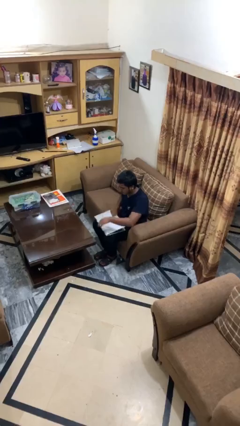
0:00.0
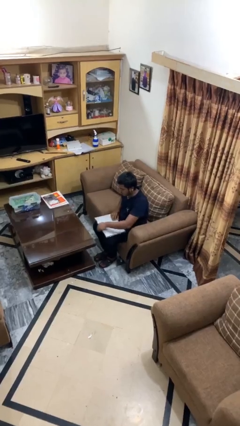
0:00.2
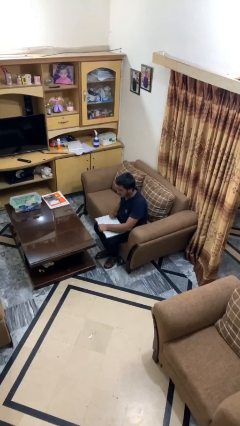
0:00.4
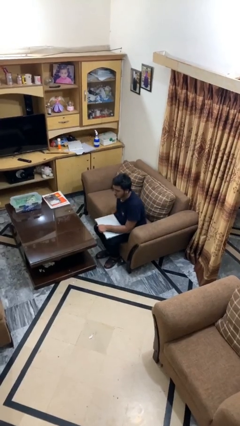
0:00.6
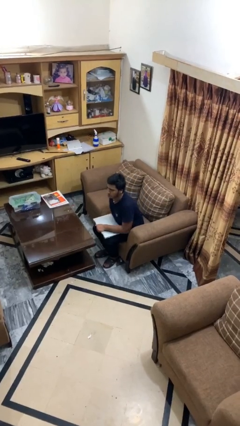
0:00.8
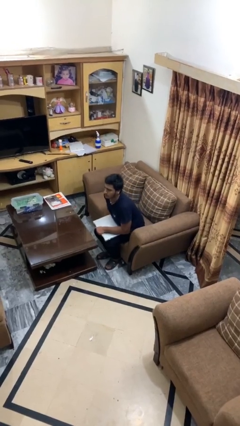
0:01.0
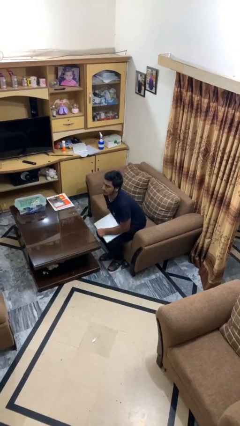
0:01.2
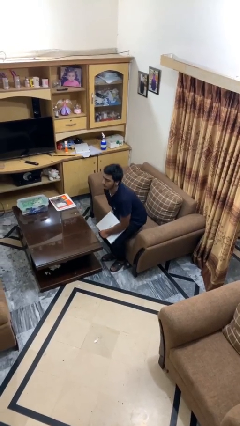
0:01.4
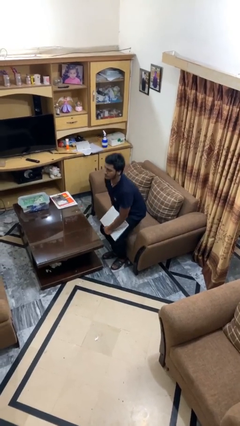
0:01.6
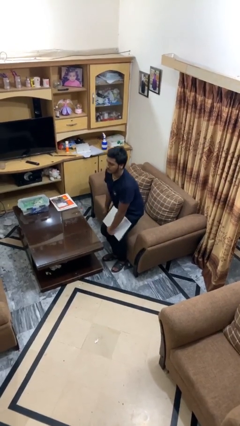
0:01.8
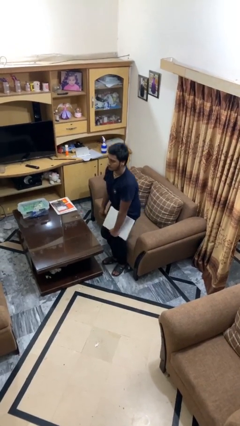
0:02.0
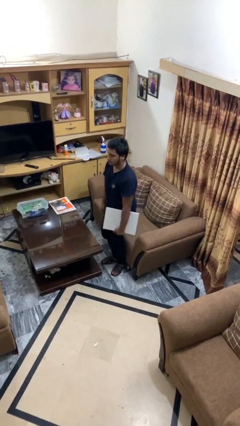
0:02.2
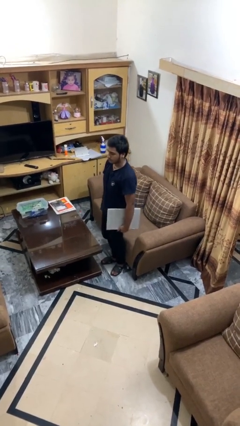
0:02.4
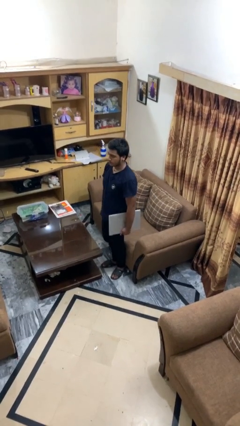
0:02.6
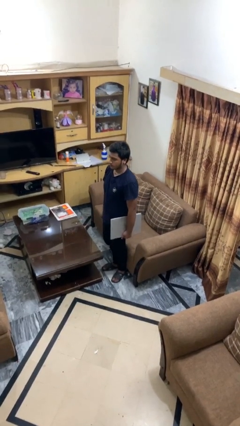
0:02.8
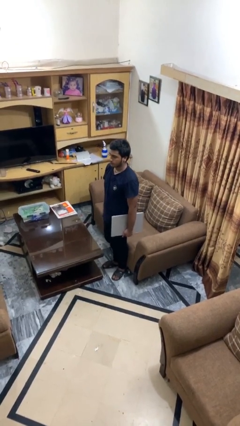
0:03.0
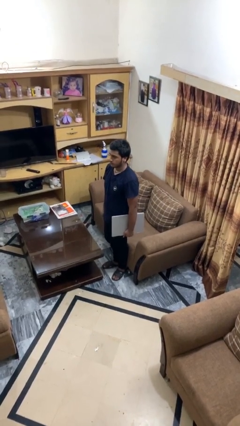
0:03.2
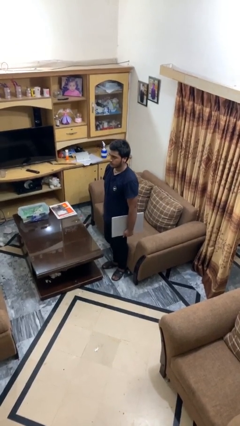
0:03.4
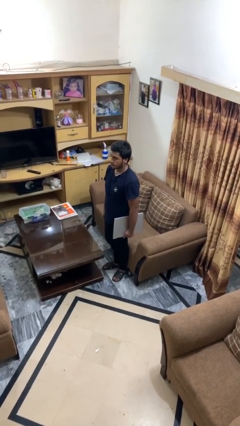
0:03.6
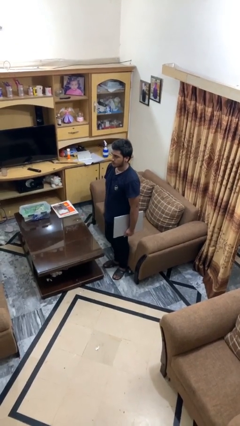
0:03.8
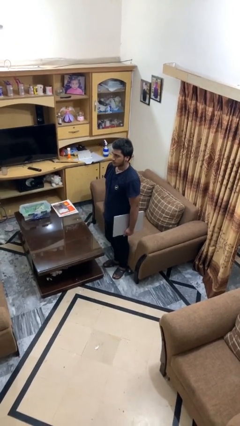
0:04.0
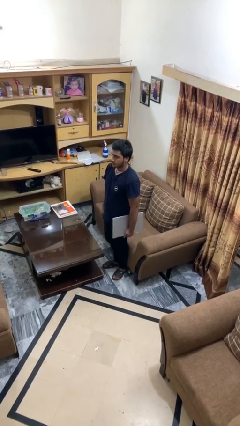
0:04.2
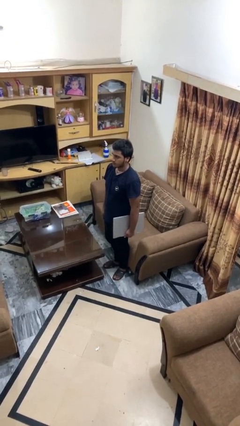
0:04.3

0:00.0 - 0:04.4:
person stands up

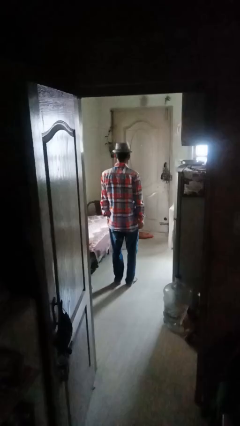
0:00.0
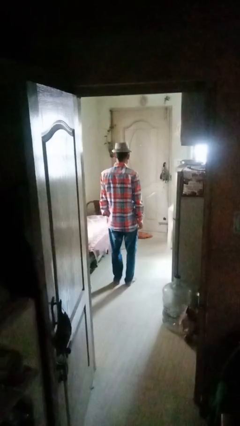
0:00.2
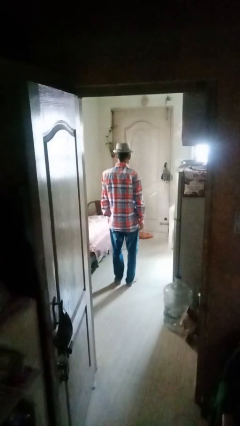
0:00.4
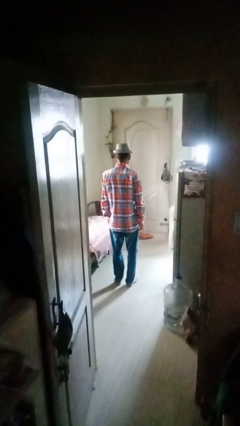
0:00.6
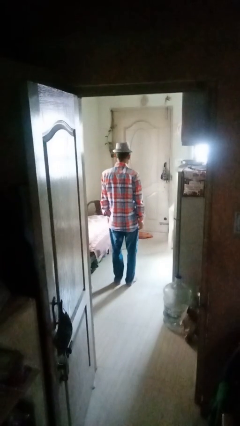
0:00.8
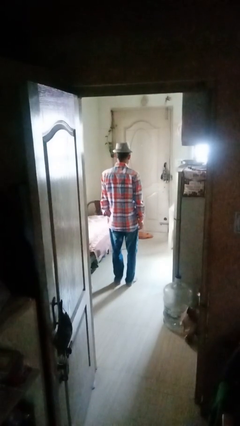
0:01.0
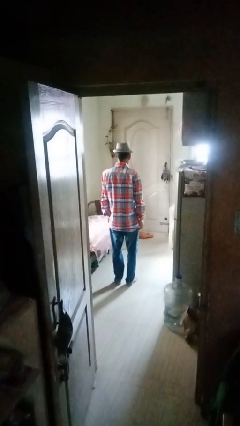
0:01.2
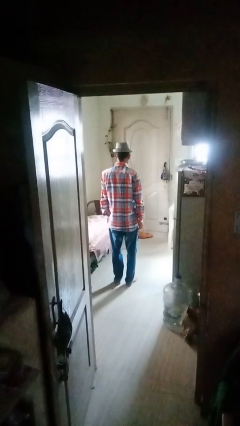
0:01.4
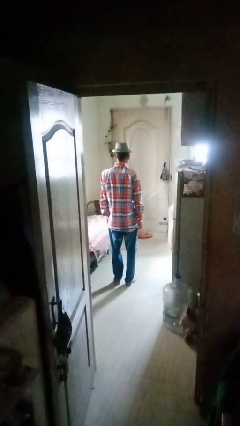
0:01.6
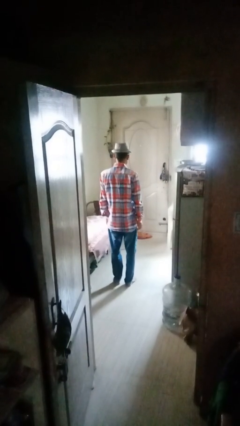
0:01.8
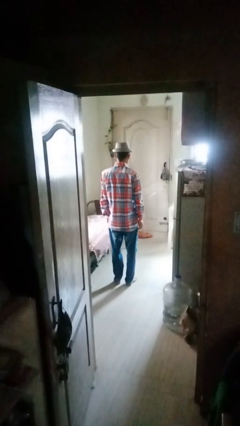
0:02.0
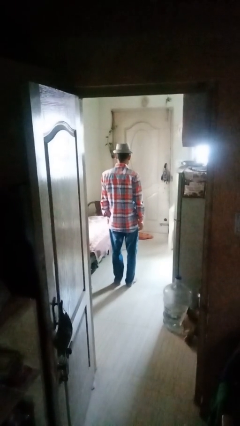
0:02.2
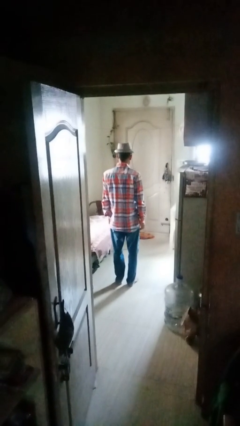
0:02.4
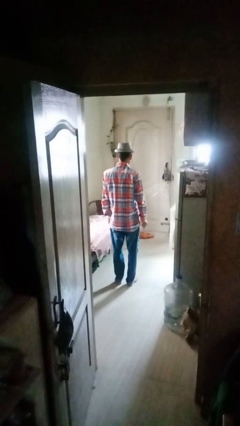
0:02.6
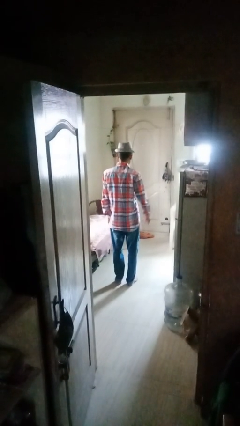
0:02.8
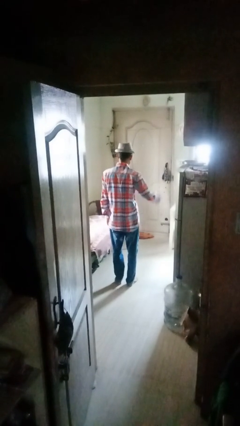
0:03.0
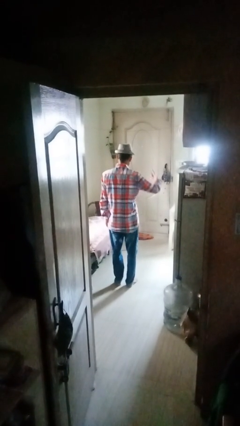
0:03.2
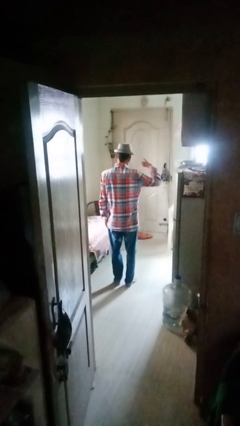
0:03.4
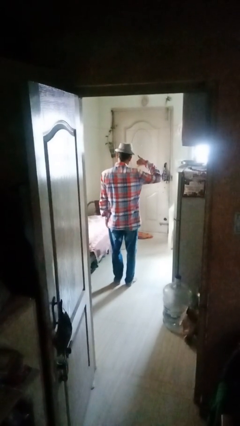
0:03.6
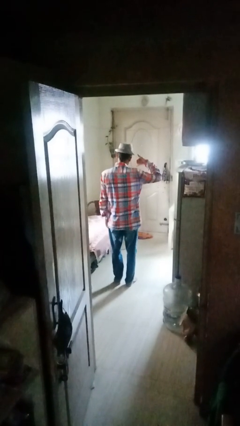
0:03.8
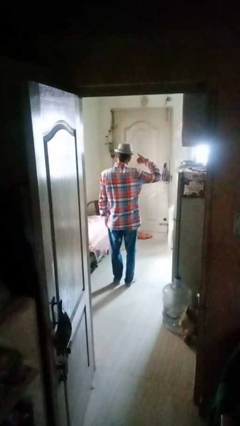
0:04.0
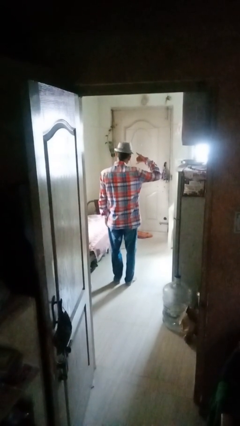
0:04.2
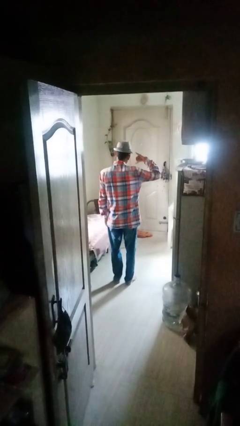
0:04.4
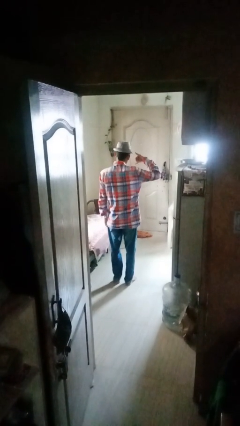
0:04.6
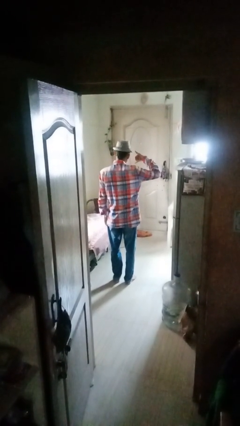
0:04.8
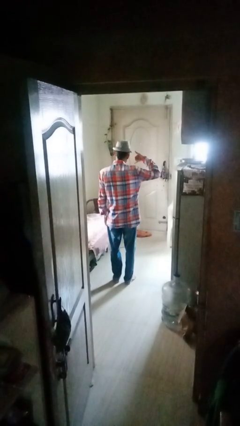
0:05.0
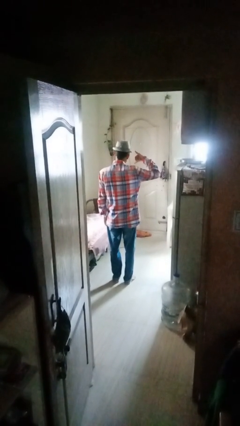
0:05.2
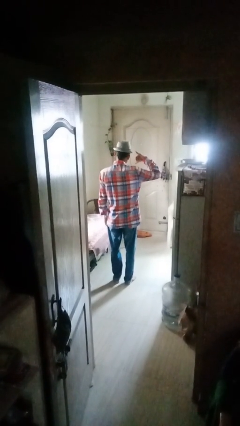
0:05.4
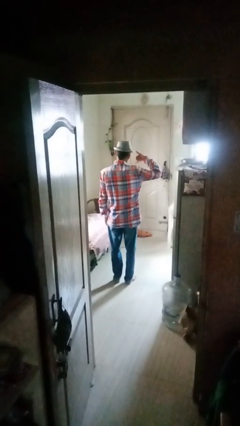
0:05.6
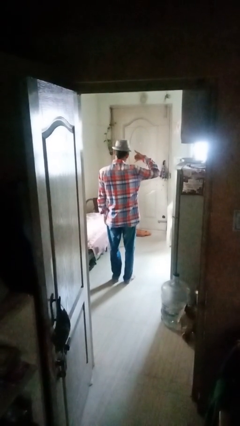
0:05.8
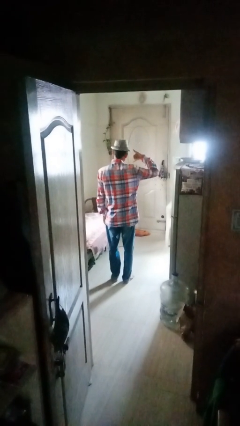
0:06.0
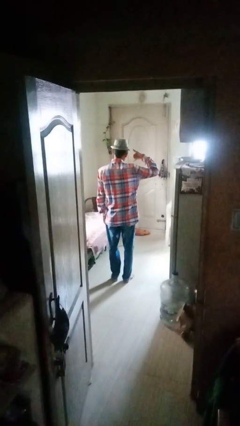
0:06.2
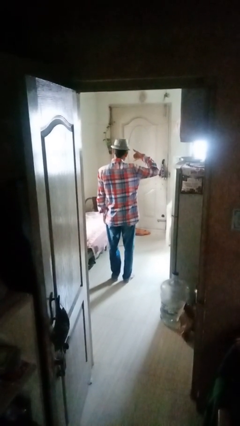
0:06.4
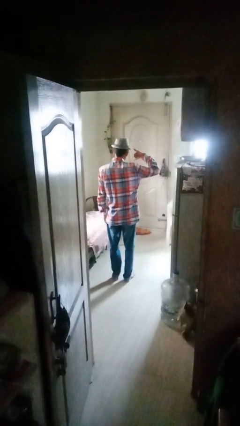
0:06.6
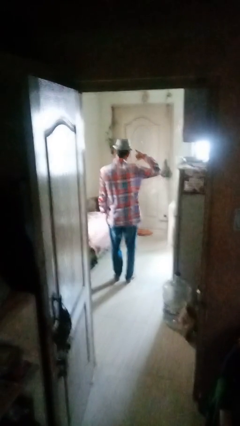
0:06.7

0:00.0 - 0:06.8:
person gestures call me

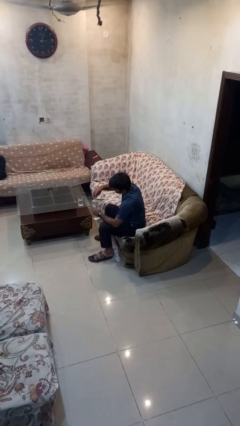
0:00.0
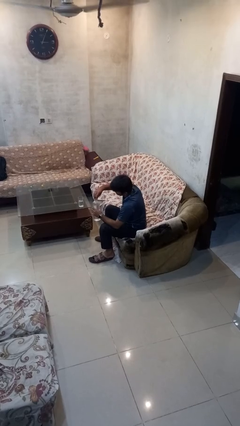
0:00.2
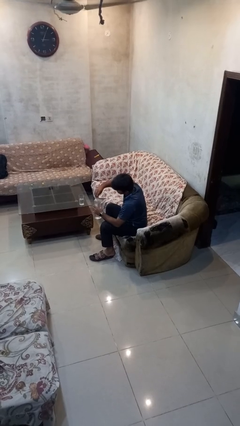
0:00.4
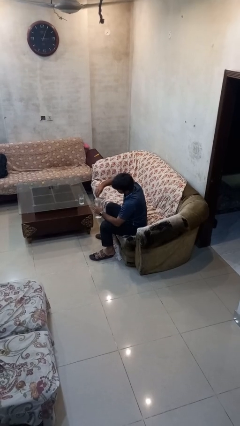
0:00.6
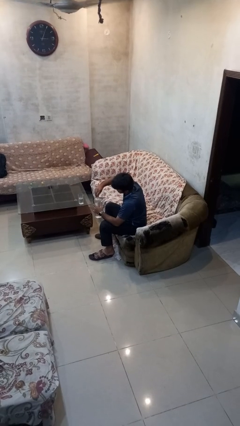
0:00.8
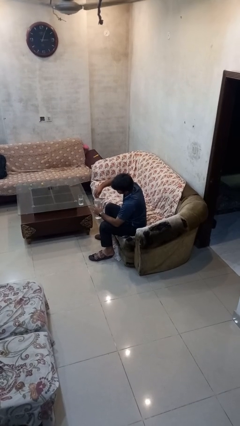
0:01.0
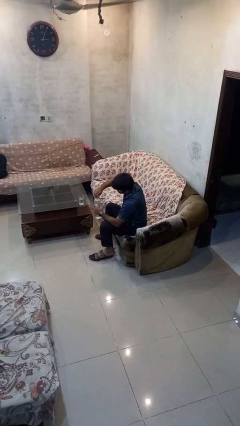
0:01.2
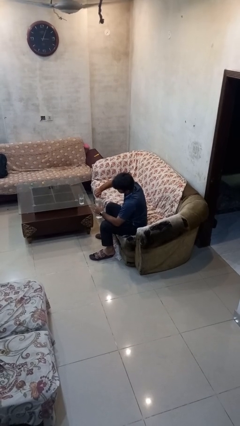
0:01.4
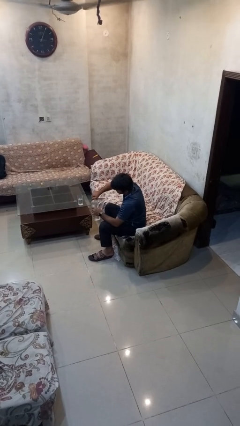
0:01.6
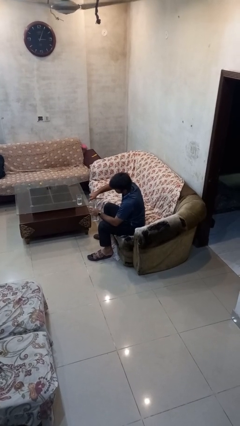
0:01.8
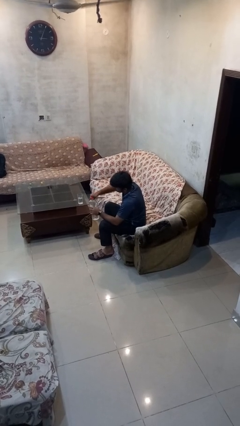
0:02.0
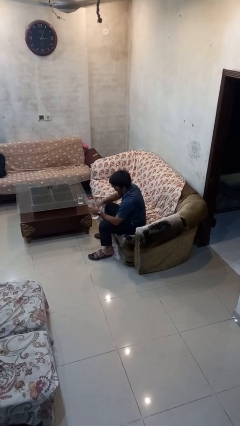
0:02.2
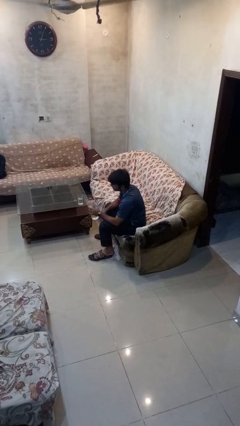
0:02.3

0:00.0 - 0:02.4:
person screws lid to bottle

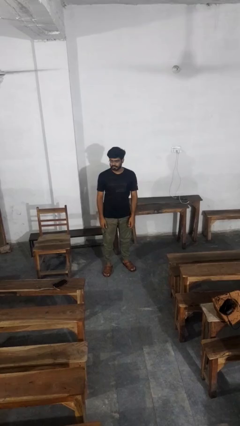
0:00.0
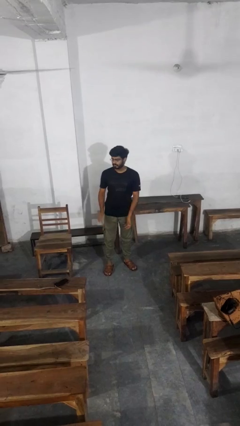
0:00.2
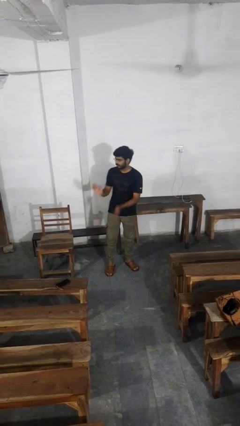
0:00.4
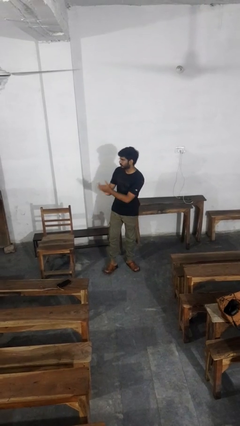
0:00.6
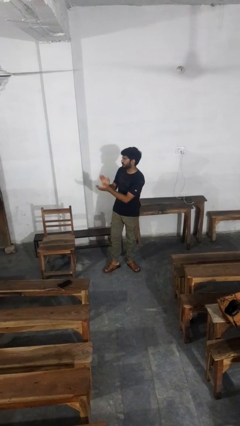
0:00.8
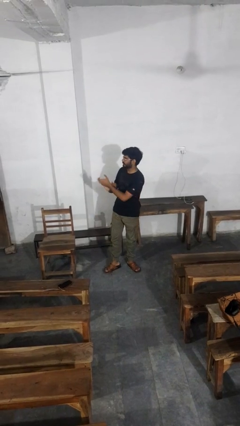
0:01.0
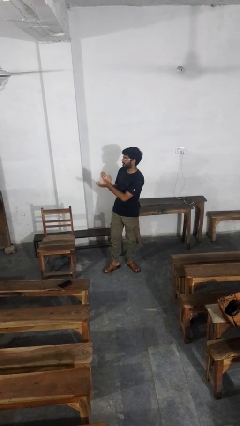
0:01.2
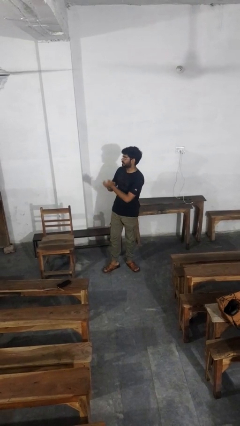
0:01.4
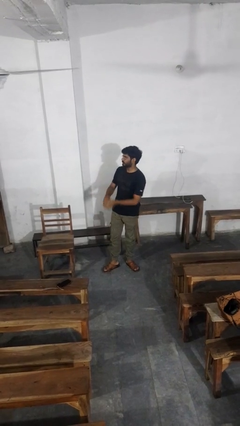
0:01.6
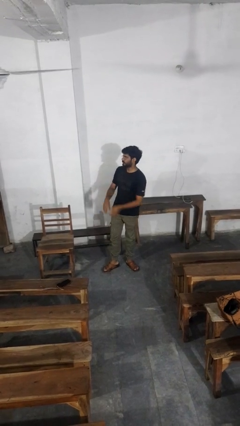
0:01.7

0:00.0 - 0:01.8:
person claps hands

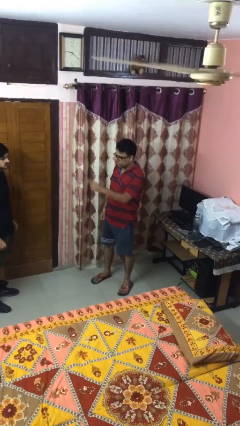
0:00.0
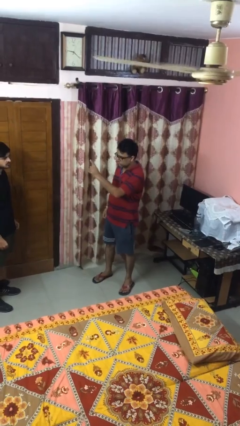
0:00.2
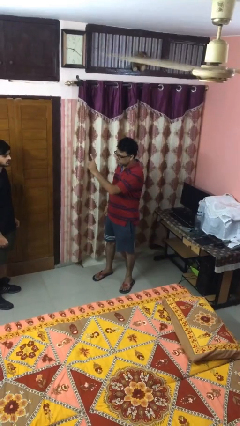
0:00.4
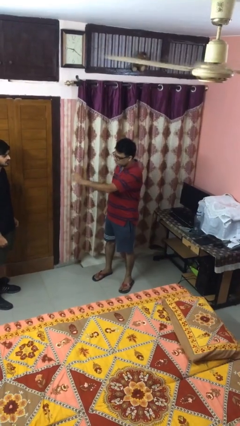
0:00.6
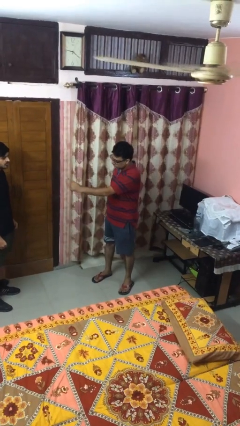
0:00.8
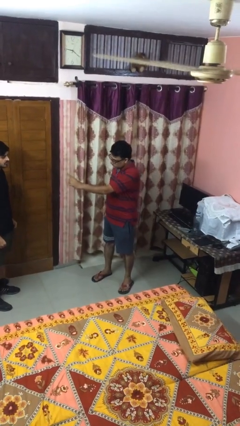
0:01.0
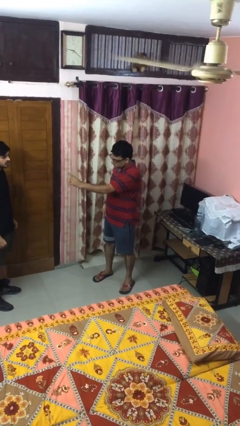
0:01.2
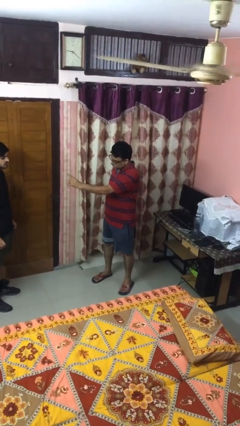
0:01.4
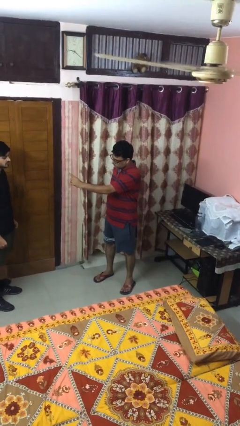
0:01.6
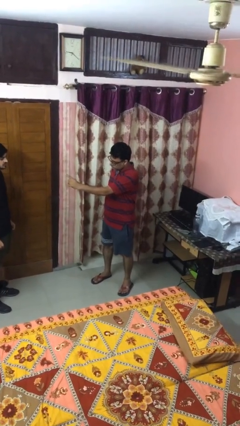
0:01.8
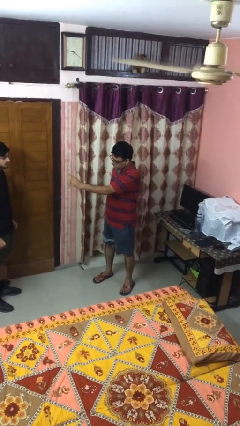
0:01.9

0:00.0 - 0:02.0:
person points at person

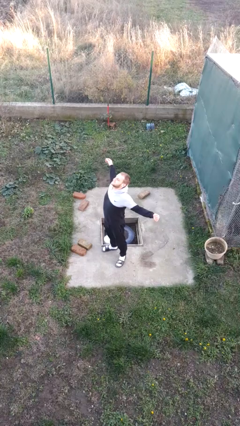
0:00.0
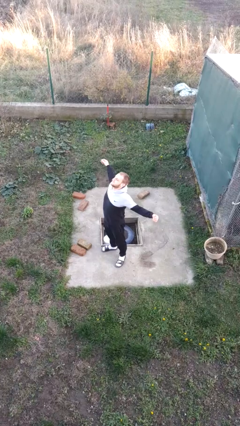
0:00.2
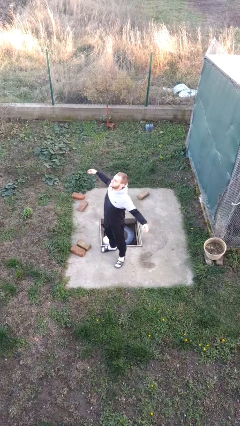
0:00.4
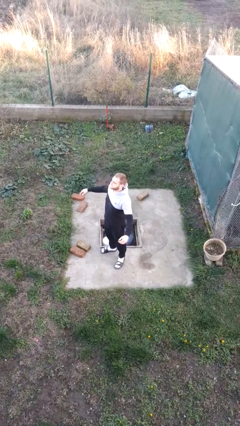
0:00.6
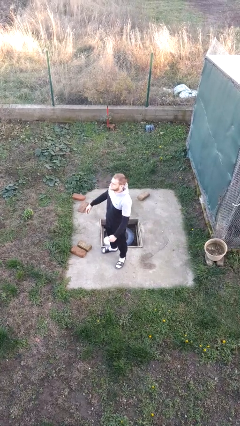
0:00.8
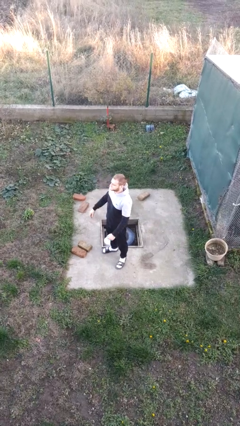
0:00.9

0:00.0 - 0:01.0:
person stretches arms to side
